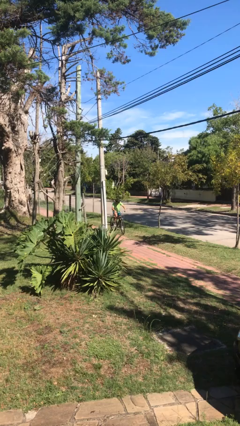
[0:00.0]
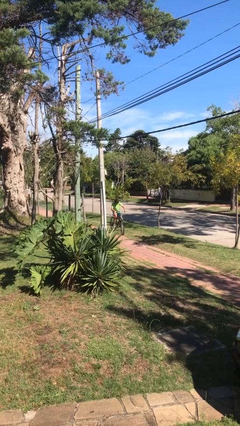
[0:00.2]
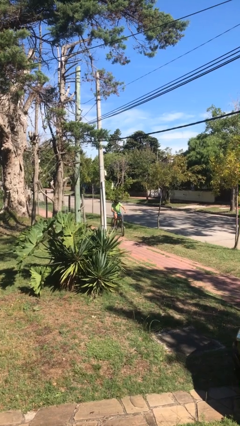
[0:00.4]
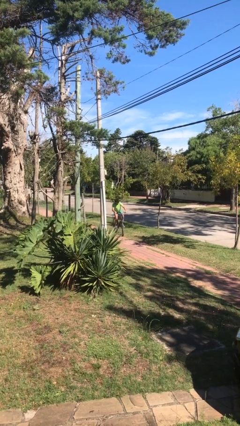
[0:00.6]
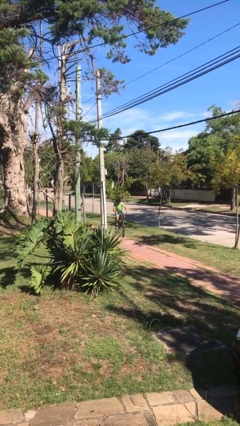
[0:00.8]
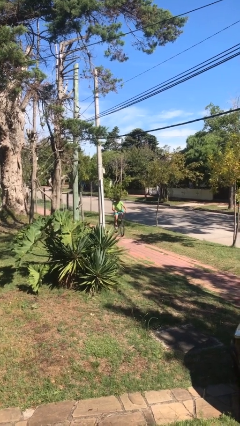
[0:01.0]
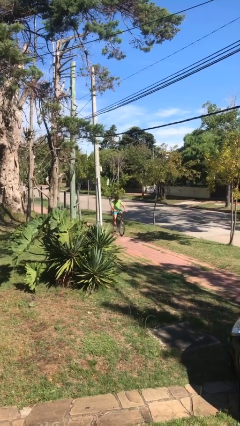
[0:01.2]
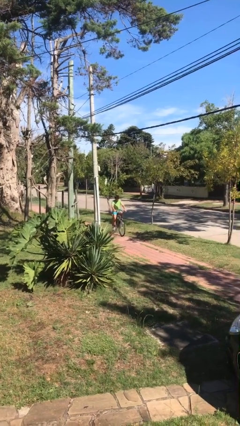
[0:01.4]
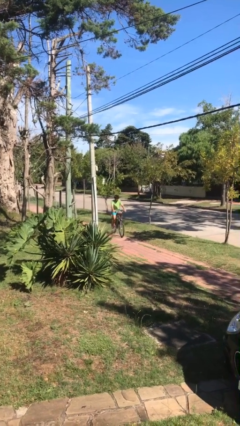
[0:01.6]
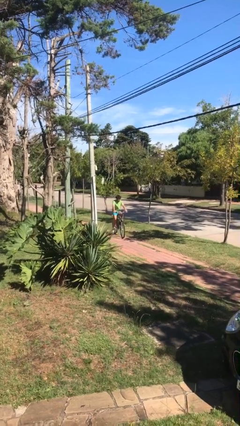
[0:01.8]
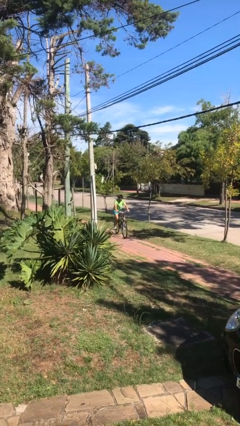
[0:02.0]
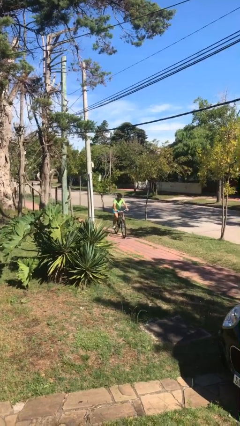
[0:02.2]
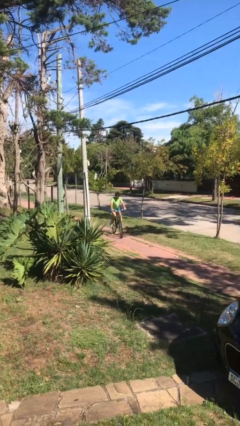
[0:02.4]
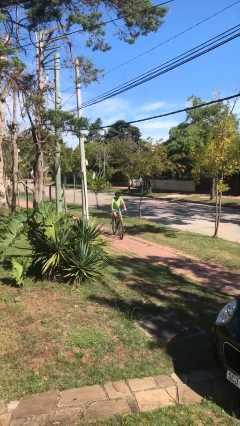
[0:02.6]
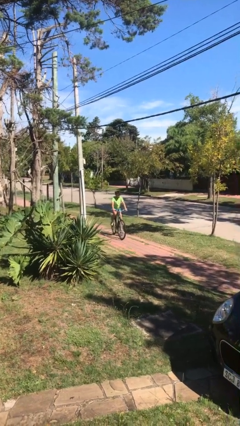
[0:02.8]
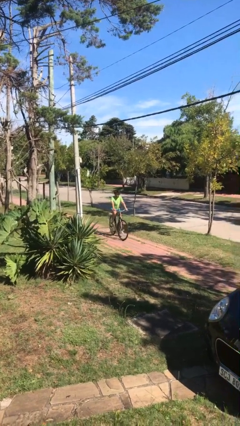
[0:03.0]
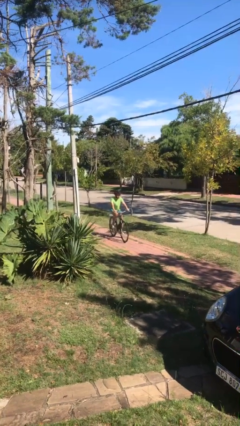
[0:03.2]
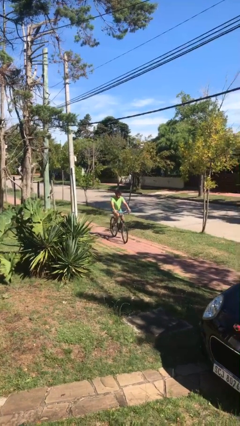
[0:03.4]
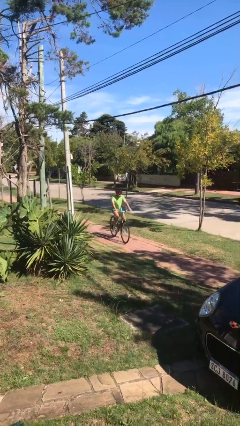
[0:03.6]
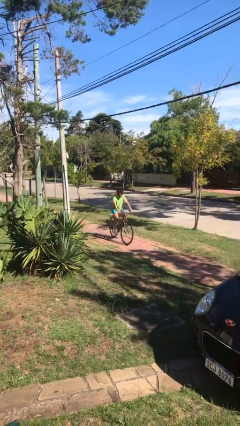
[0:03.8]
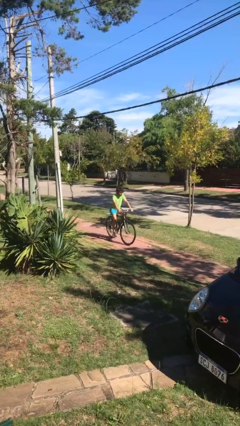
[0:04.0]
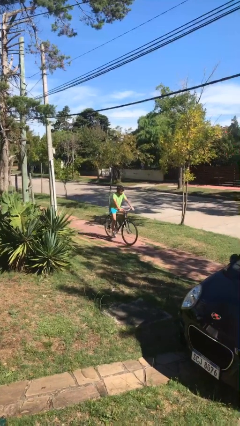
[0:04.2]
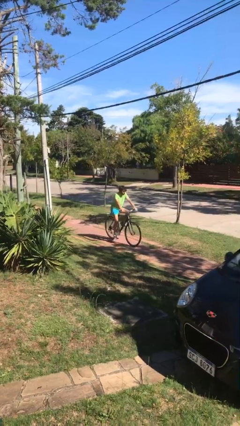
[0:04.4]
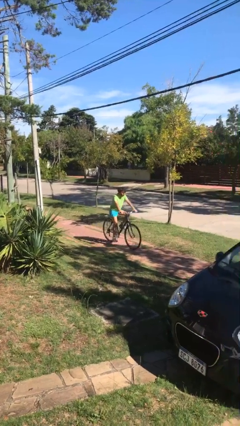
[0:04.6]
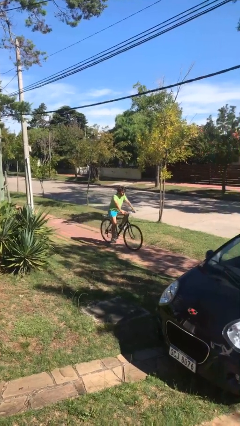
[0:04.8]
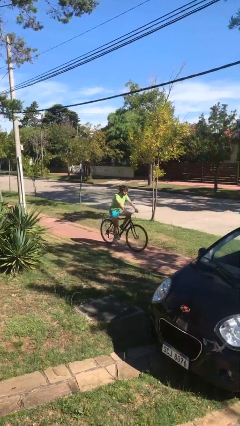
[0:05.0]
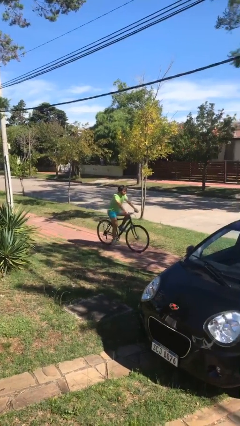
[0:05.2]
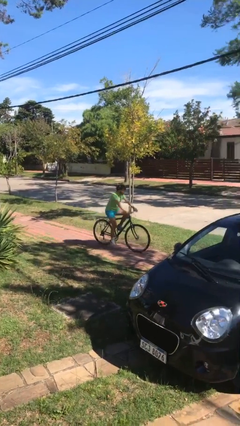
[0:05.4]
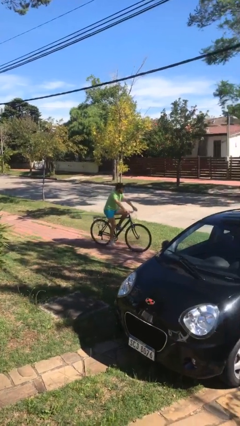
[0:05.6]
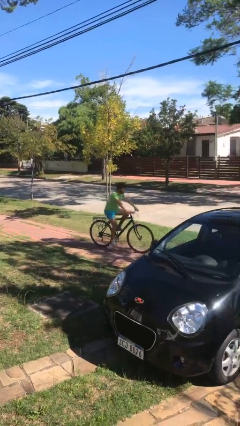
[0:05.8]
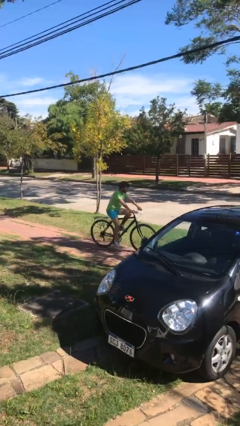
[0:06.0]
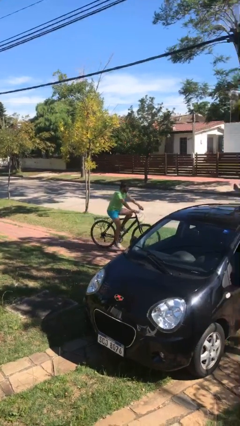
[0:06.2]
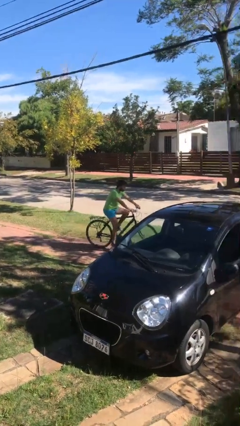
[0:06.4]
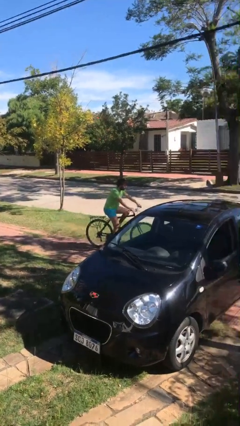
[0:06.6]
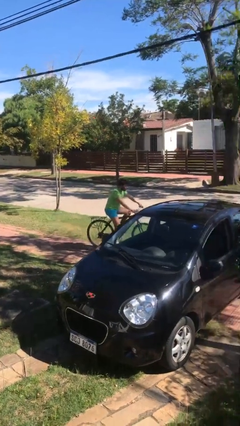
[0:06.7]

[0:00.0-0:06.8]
person rides bicycle

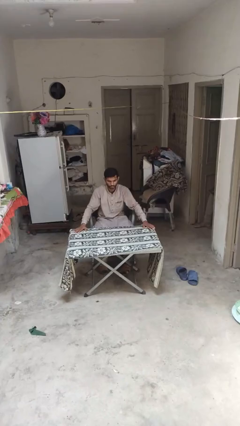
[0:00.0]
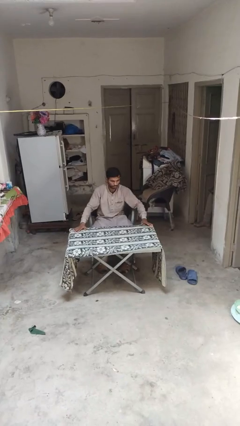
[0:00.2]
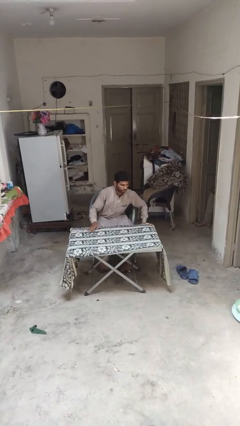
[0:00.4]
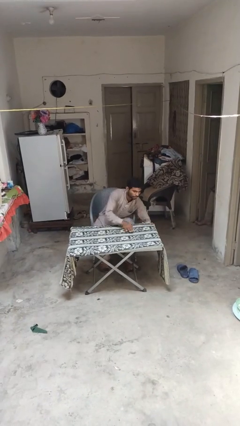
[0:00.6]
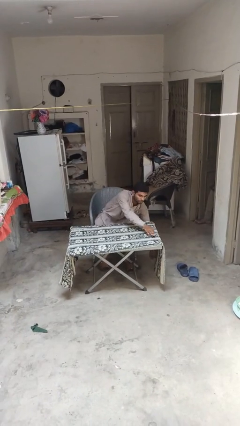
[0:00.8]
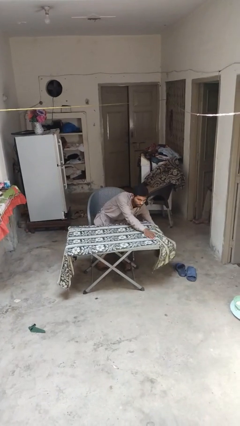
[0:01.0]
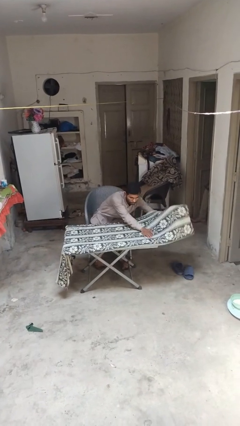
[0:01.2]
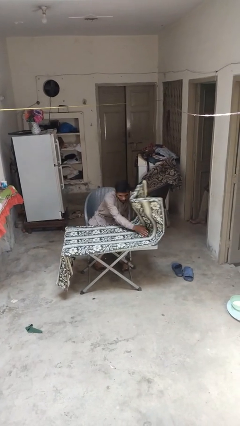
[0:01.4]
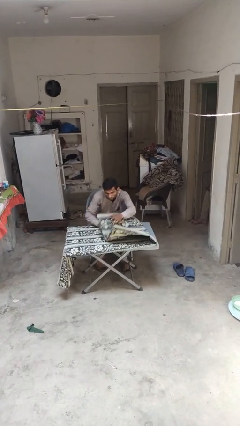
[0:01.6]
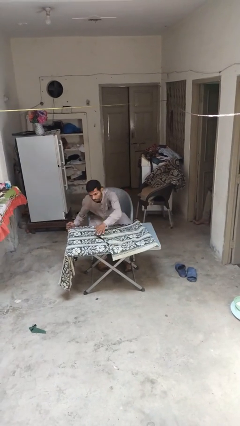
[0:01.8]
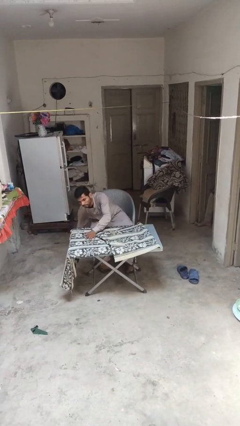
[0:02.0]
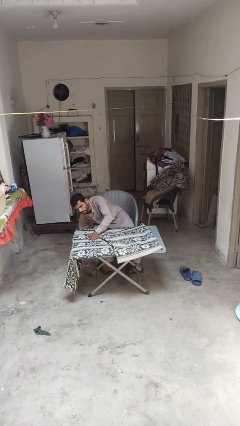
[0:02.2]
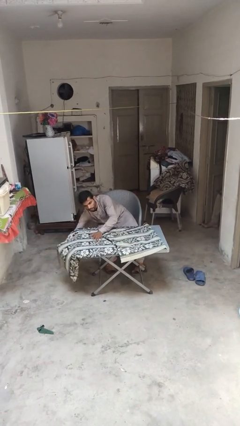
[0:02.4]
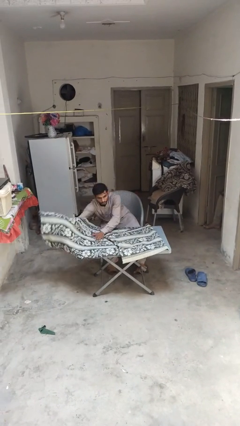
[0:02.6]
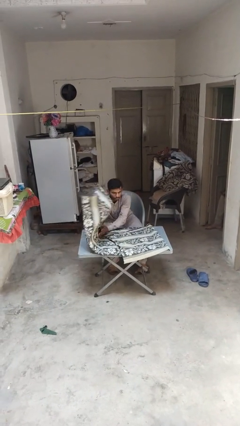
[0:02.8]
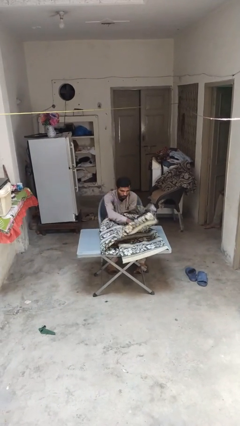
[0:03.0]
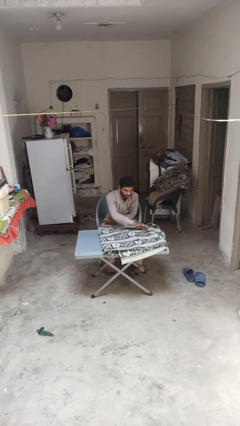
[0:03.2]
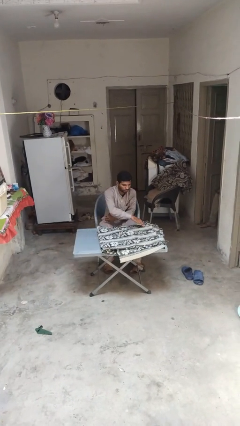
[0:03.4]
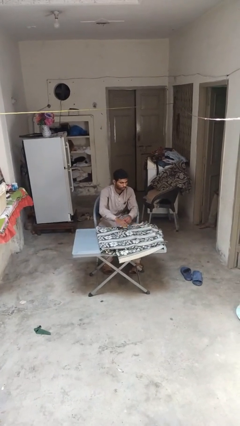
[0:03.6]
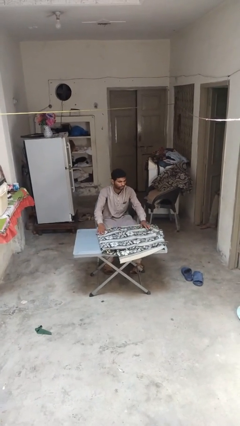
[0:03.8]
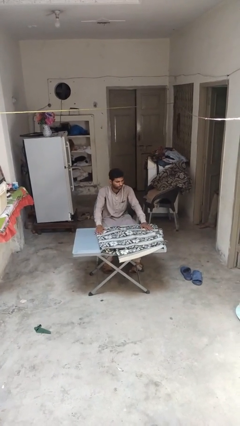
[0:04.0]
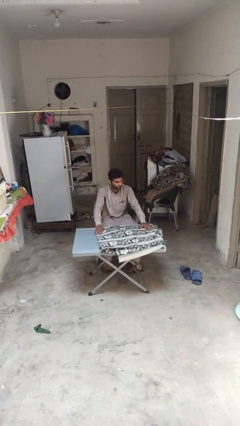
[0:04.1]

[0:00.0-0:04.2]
person folds tablecloth

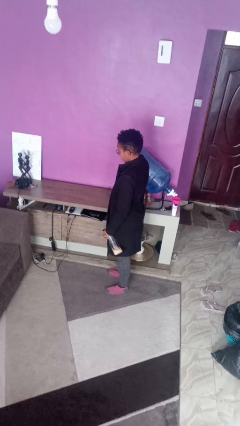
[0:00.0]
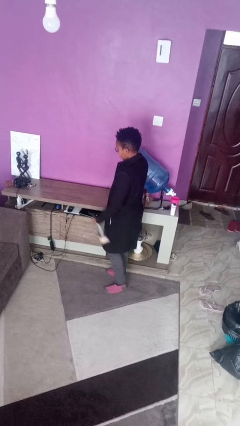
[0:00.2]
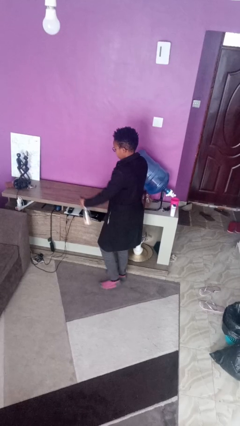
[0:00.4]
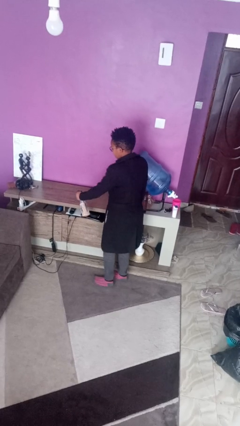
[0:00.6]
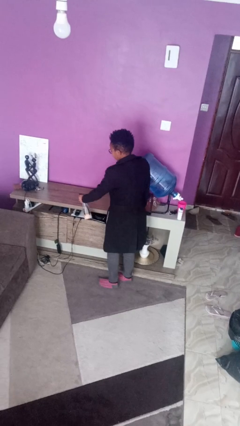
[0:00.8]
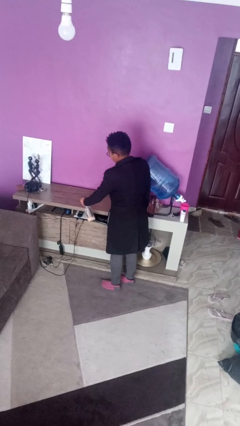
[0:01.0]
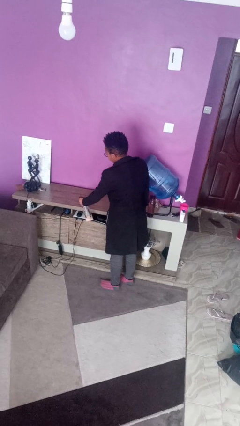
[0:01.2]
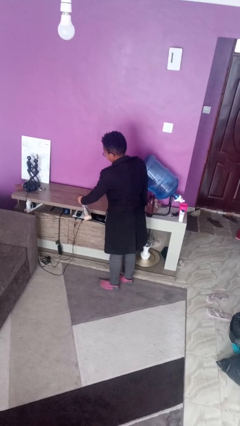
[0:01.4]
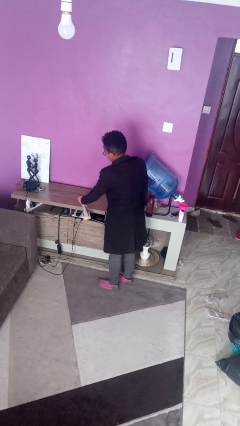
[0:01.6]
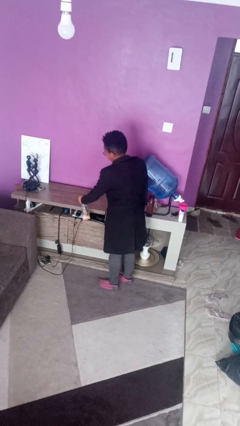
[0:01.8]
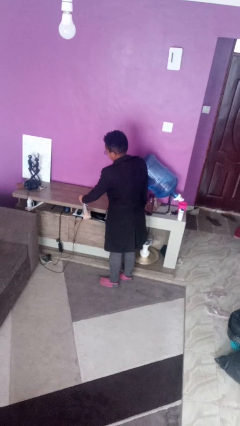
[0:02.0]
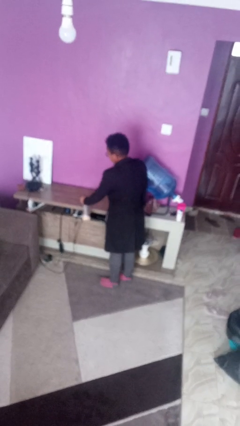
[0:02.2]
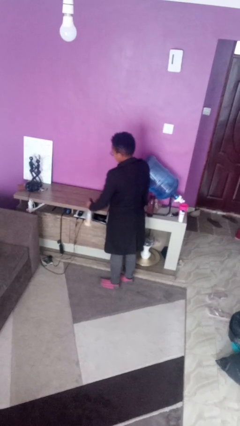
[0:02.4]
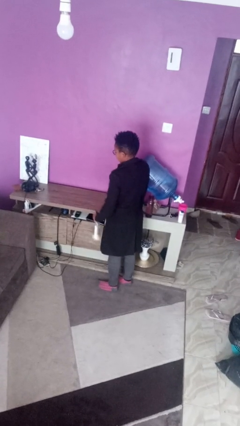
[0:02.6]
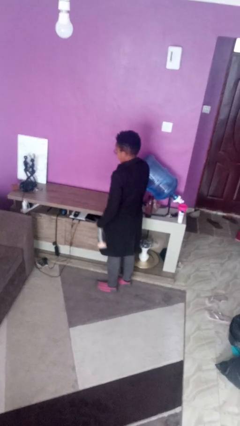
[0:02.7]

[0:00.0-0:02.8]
person sprays from bottle

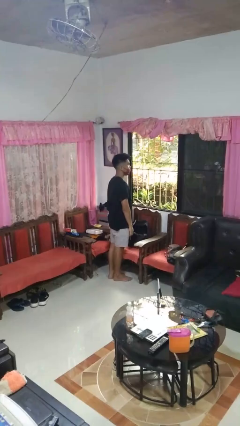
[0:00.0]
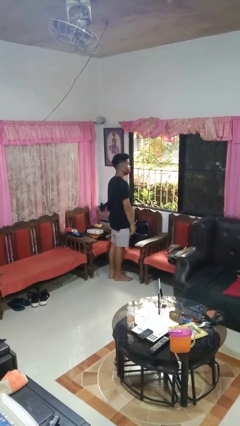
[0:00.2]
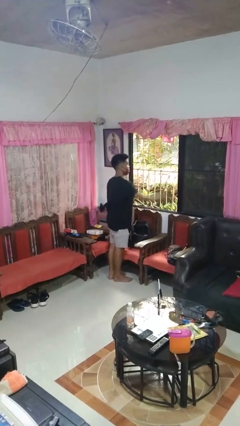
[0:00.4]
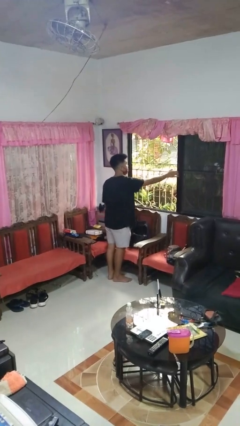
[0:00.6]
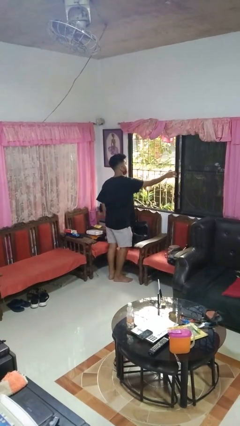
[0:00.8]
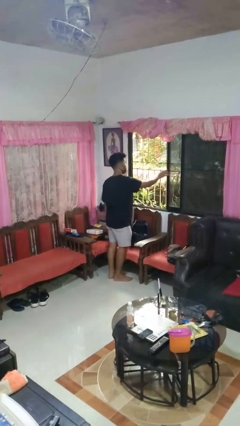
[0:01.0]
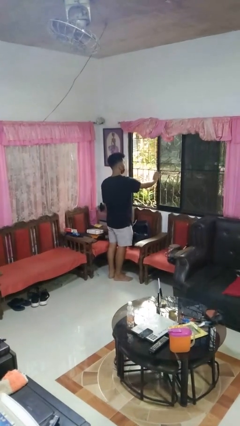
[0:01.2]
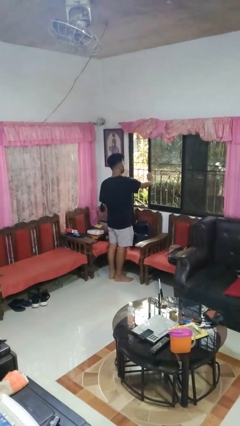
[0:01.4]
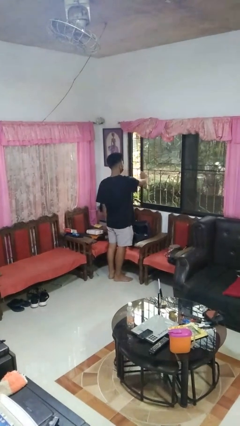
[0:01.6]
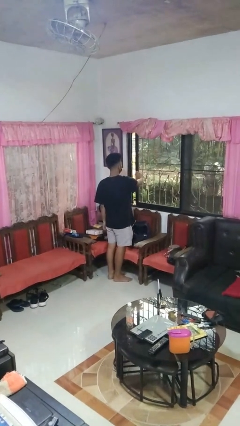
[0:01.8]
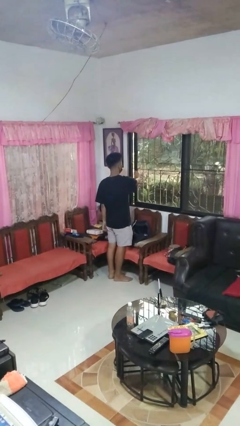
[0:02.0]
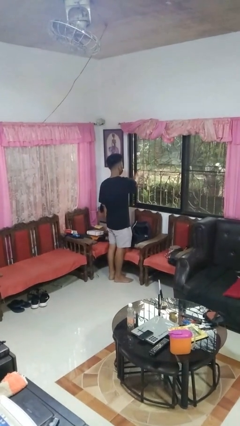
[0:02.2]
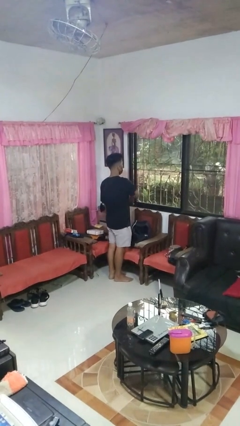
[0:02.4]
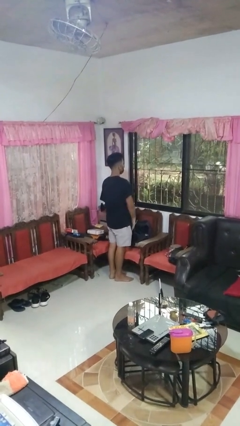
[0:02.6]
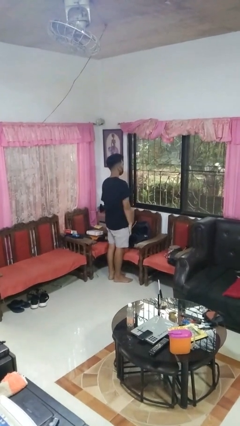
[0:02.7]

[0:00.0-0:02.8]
person closes home window

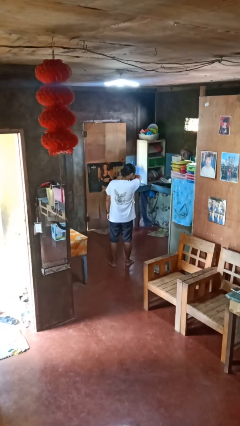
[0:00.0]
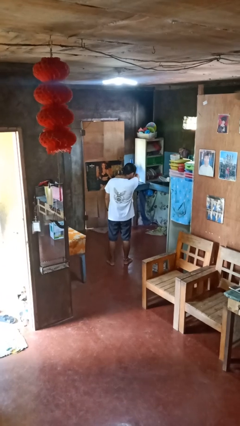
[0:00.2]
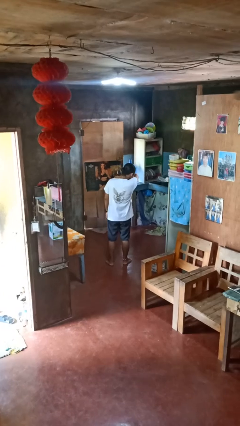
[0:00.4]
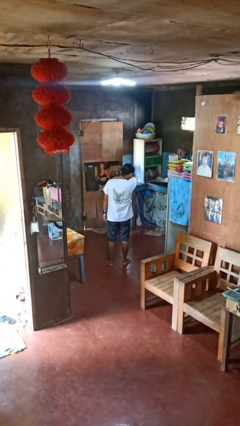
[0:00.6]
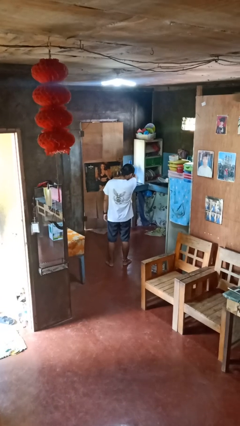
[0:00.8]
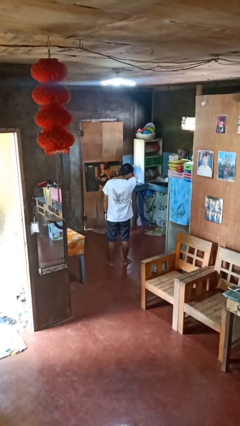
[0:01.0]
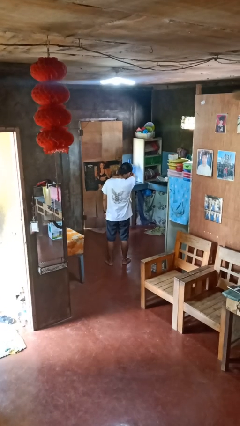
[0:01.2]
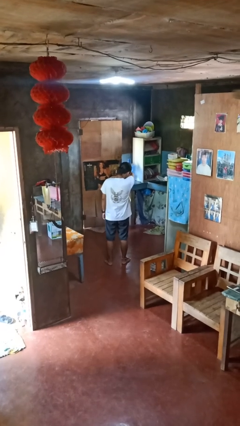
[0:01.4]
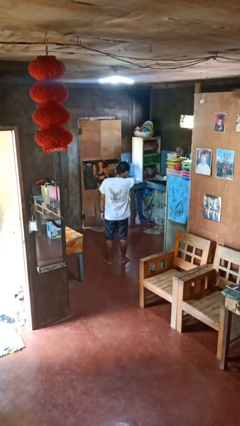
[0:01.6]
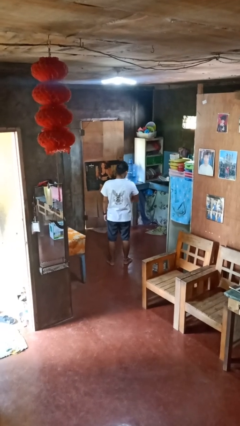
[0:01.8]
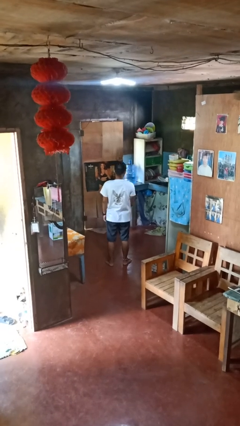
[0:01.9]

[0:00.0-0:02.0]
person sneezes into arm
